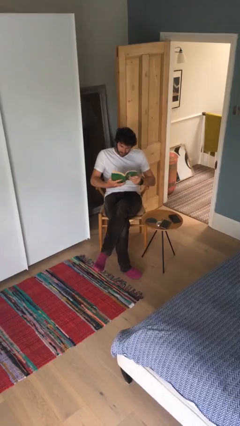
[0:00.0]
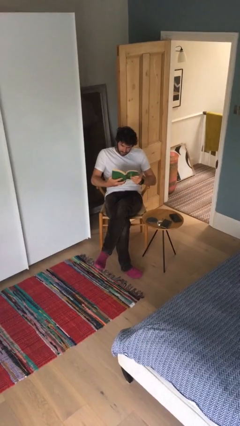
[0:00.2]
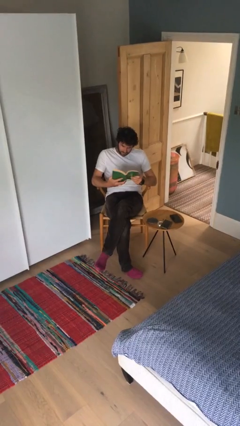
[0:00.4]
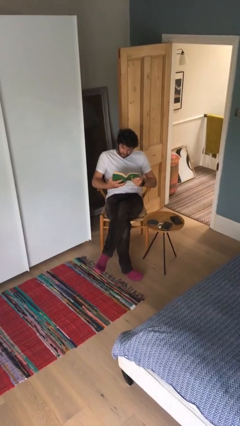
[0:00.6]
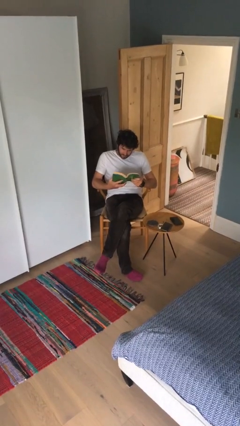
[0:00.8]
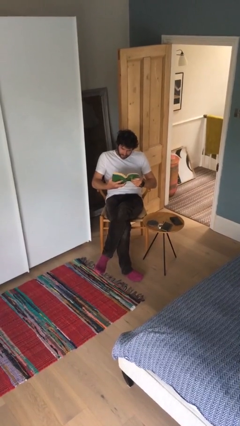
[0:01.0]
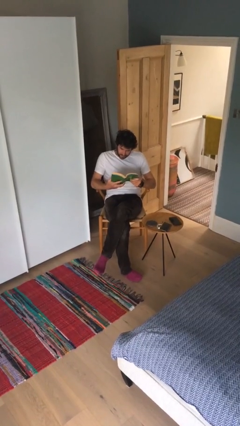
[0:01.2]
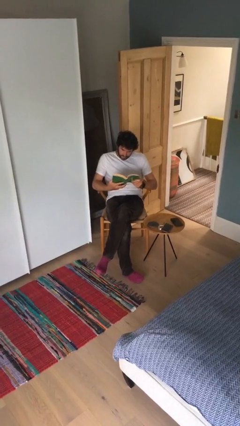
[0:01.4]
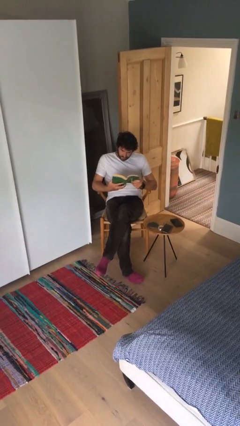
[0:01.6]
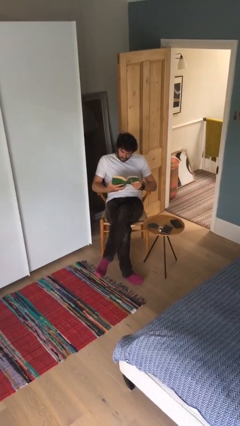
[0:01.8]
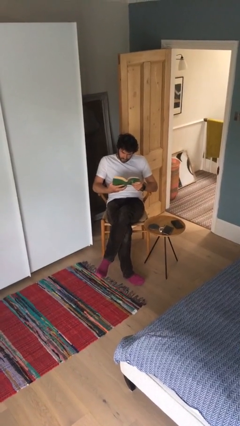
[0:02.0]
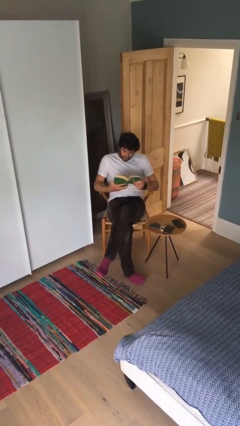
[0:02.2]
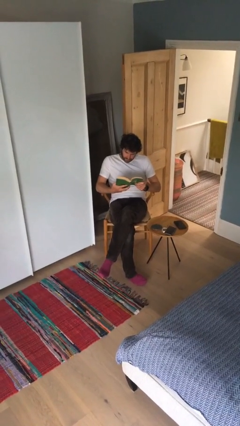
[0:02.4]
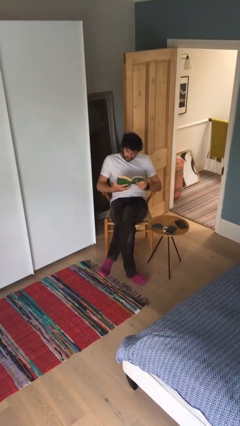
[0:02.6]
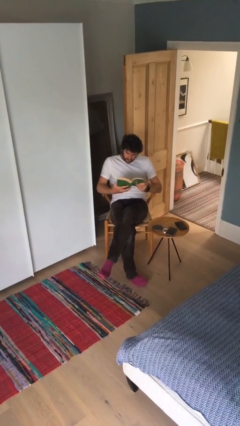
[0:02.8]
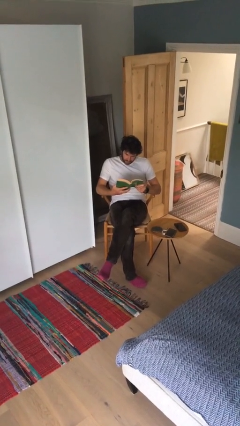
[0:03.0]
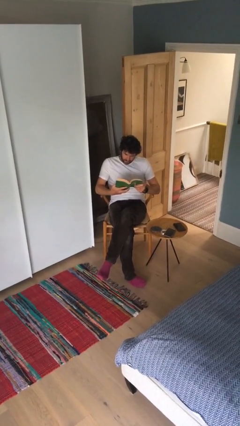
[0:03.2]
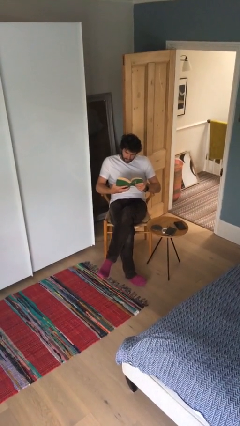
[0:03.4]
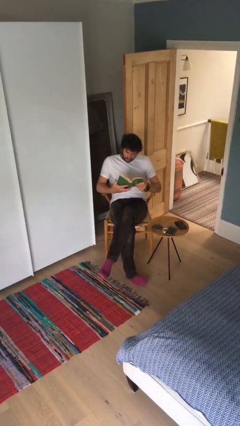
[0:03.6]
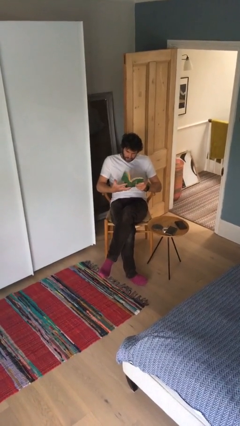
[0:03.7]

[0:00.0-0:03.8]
person reads document

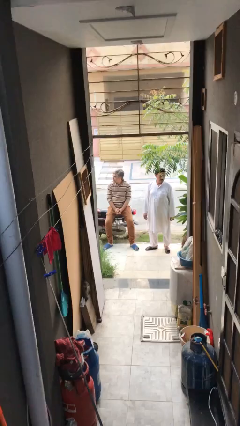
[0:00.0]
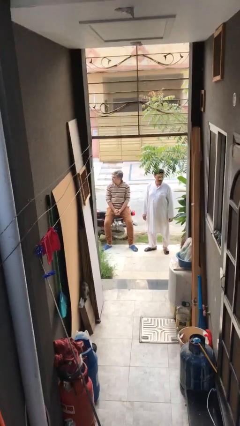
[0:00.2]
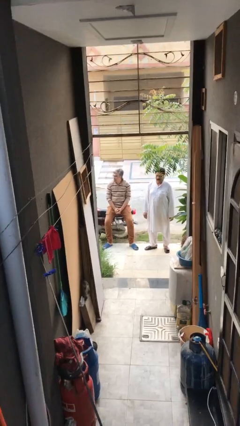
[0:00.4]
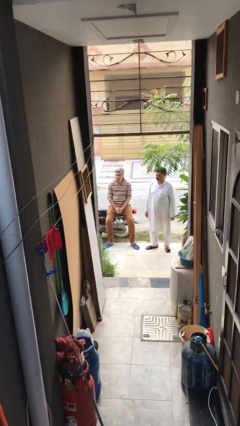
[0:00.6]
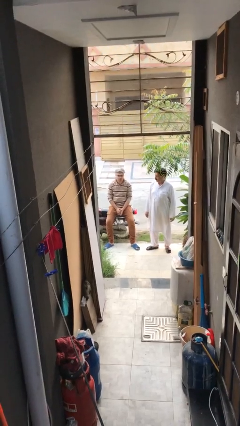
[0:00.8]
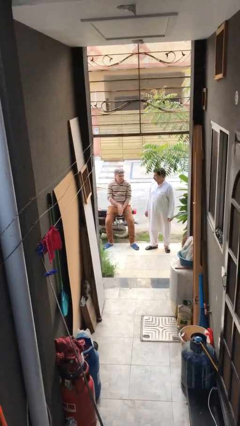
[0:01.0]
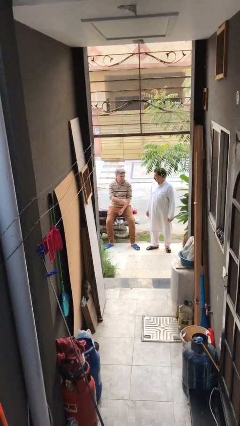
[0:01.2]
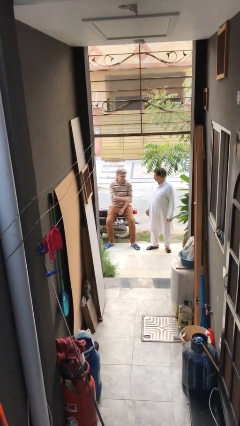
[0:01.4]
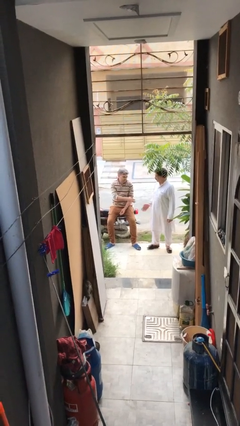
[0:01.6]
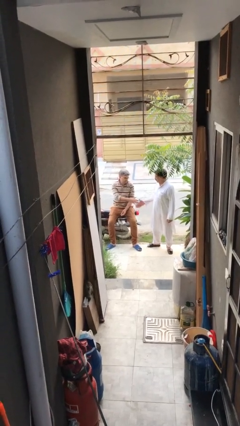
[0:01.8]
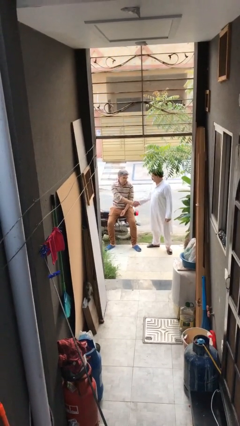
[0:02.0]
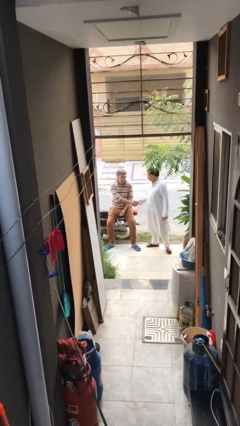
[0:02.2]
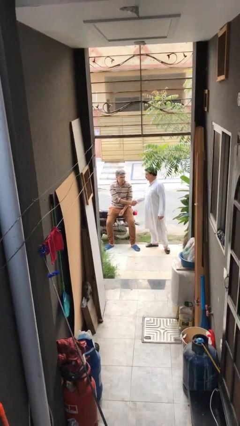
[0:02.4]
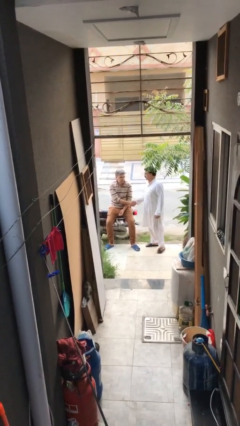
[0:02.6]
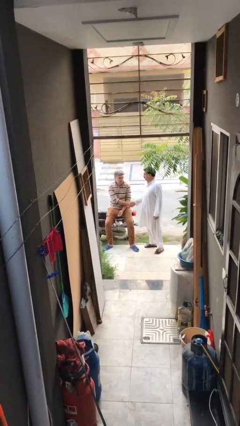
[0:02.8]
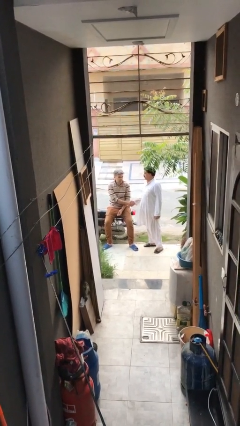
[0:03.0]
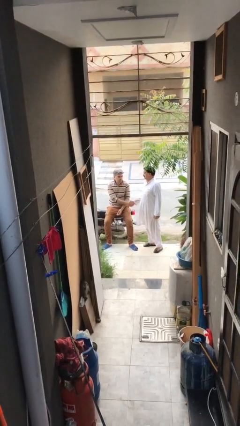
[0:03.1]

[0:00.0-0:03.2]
person shakes hand

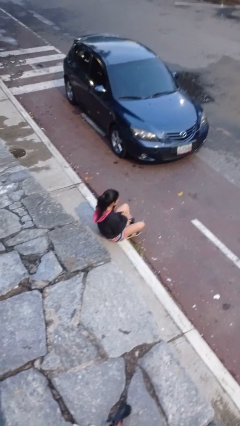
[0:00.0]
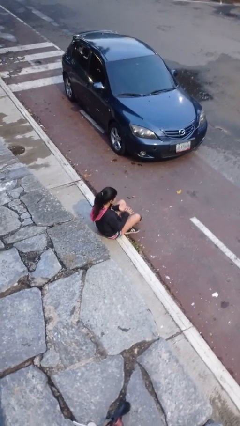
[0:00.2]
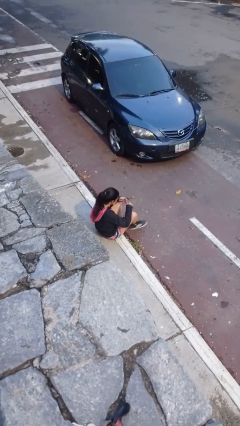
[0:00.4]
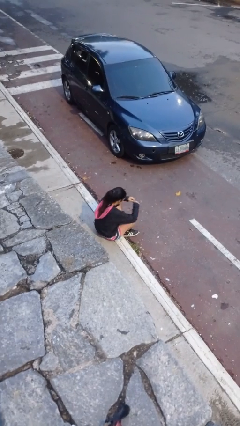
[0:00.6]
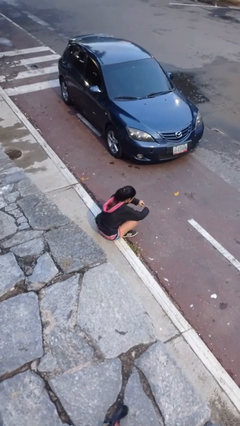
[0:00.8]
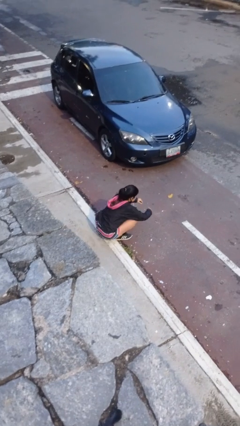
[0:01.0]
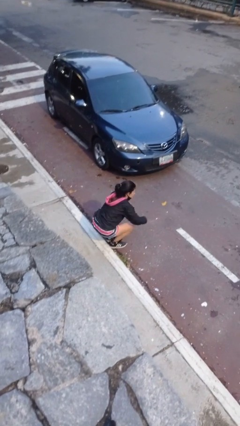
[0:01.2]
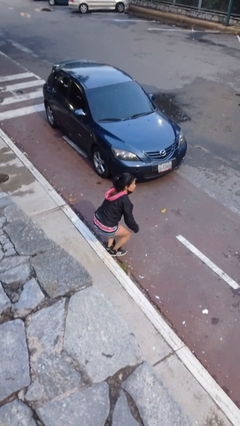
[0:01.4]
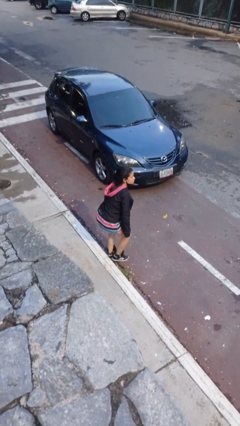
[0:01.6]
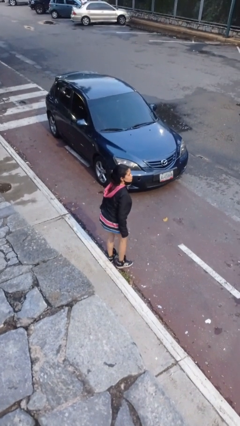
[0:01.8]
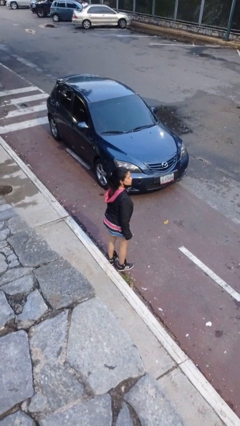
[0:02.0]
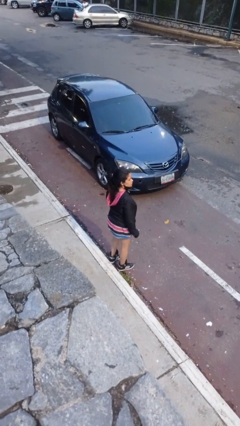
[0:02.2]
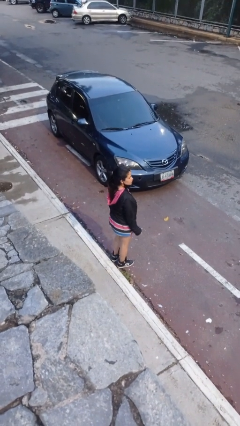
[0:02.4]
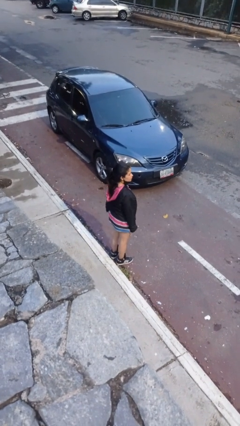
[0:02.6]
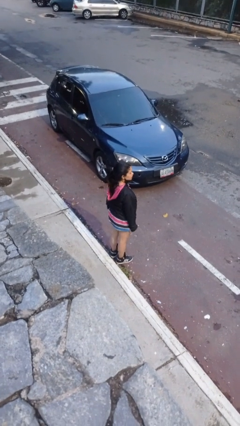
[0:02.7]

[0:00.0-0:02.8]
person stands up from floor

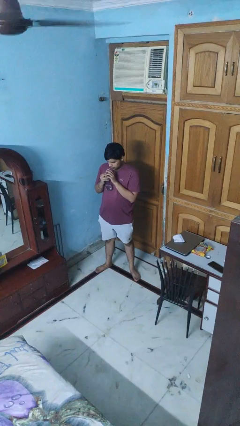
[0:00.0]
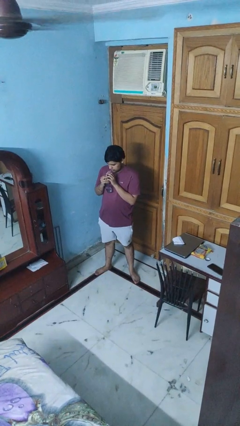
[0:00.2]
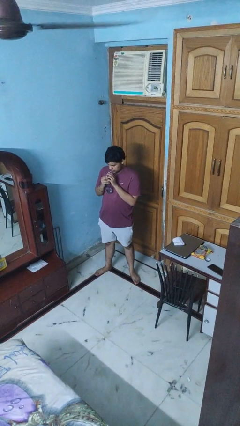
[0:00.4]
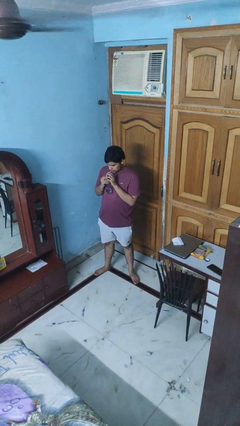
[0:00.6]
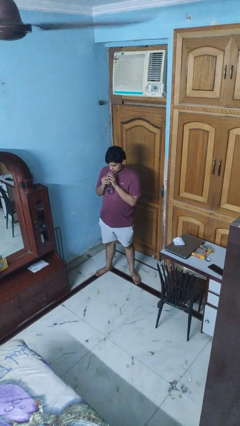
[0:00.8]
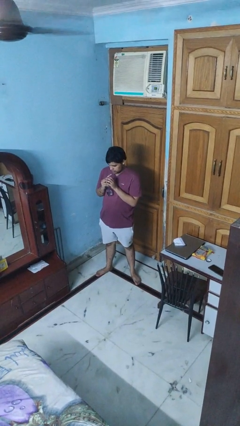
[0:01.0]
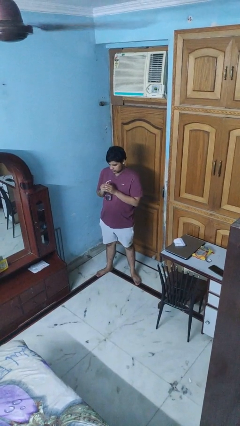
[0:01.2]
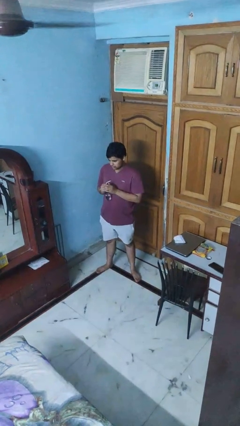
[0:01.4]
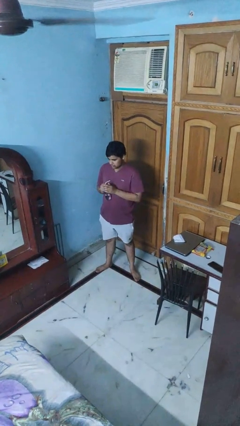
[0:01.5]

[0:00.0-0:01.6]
person drinks from straw

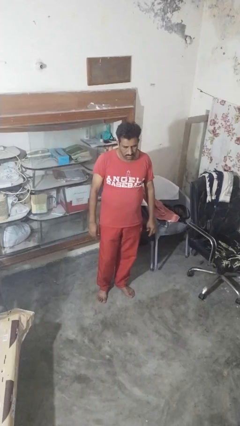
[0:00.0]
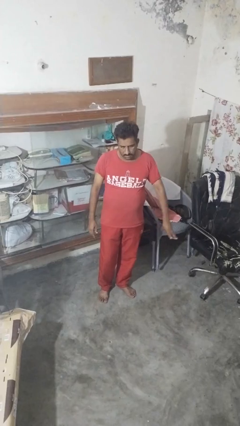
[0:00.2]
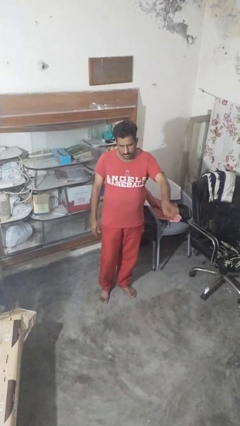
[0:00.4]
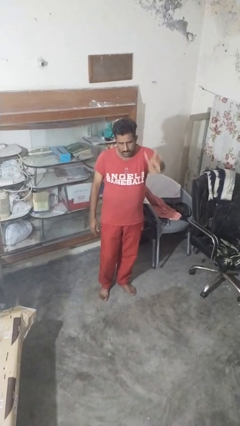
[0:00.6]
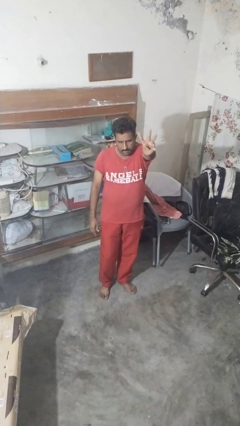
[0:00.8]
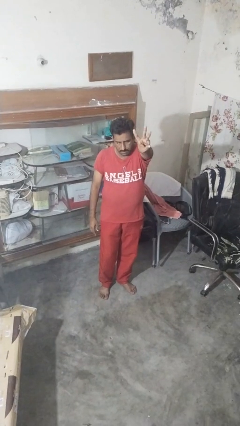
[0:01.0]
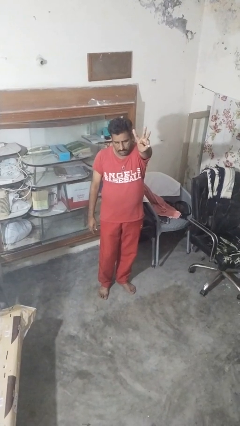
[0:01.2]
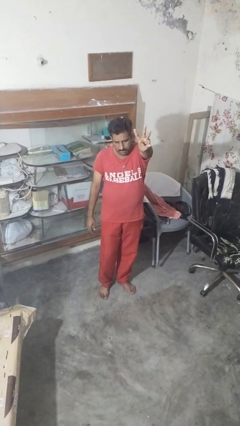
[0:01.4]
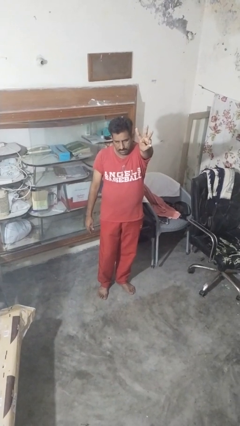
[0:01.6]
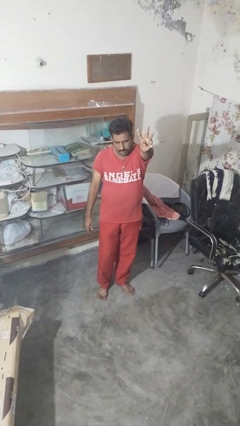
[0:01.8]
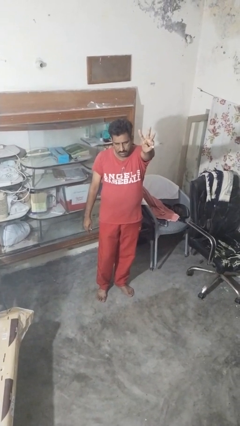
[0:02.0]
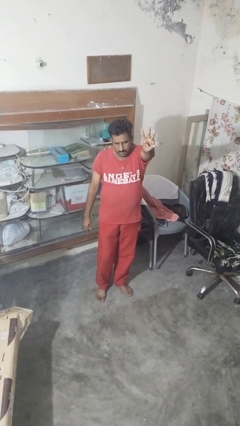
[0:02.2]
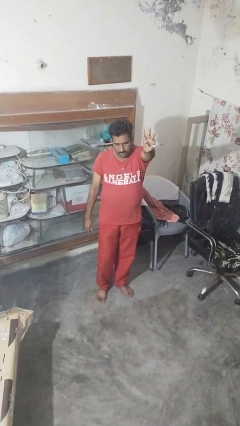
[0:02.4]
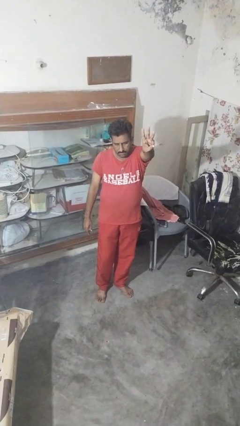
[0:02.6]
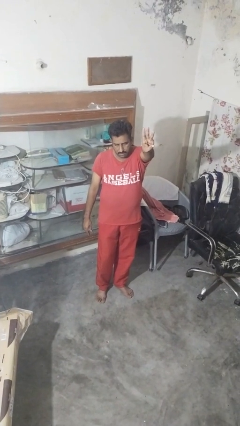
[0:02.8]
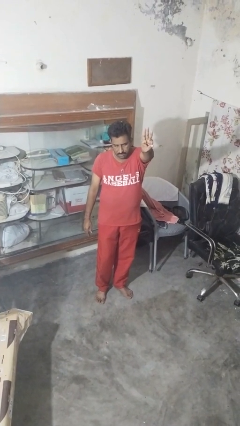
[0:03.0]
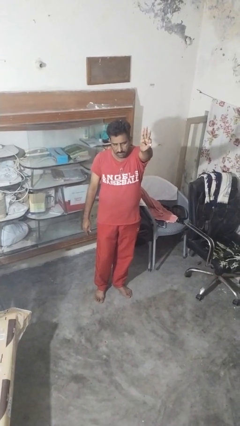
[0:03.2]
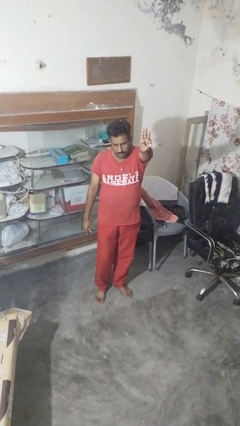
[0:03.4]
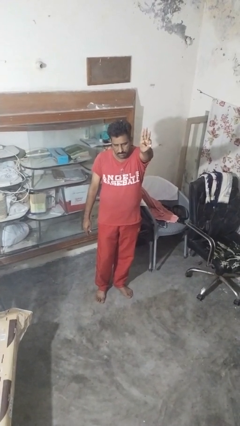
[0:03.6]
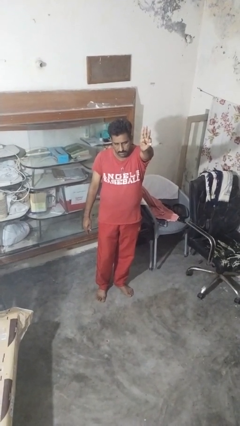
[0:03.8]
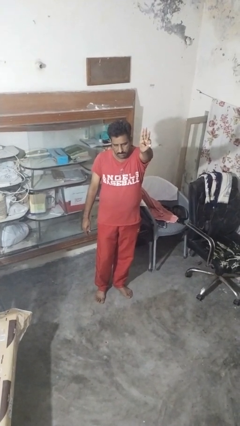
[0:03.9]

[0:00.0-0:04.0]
person gestures number three

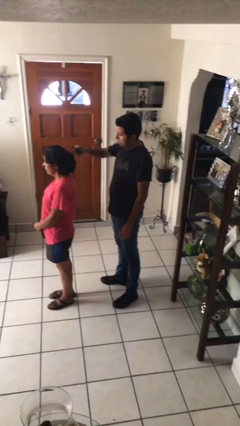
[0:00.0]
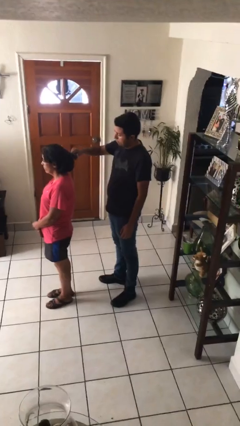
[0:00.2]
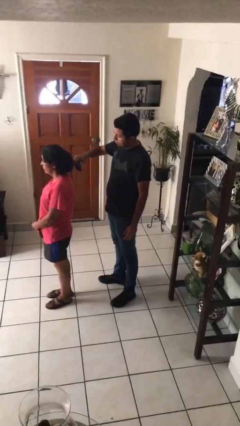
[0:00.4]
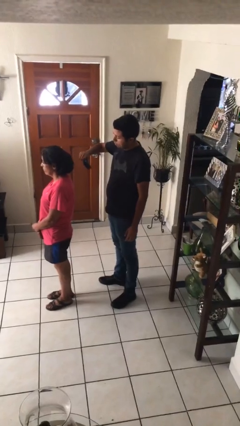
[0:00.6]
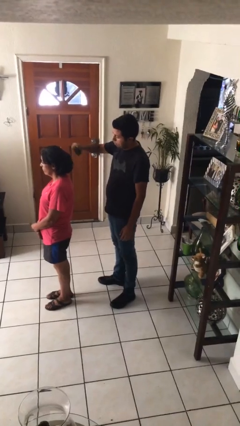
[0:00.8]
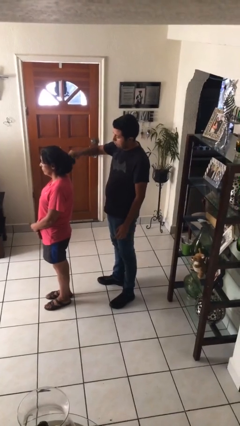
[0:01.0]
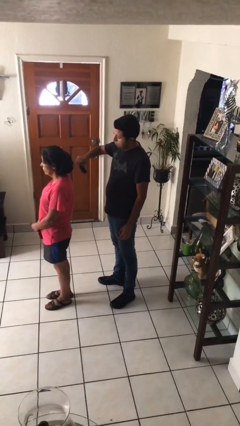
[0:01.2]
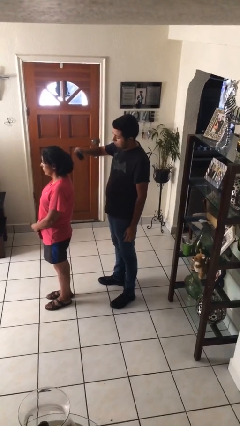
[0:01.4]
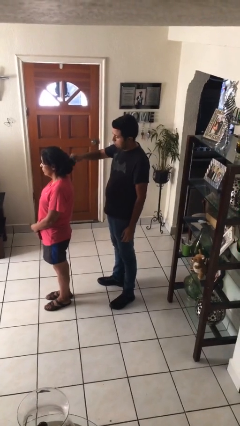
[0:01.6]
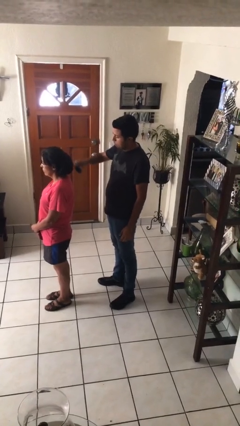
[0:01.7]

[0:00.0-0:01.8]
person brushes hair of person

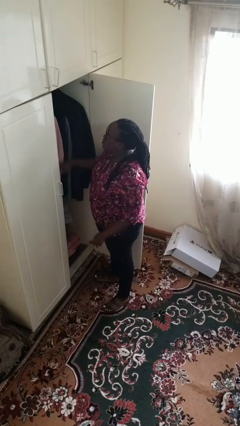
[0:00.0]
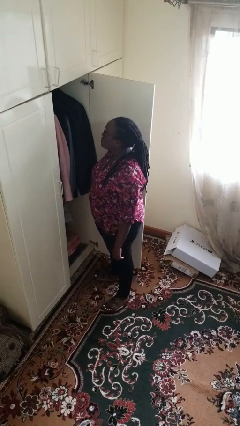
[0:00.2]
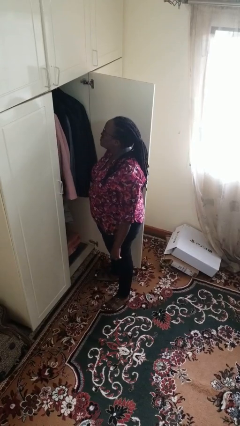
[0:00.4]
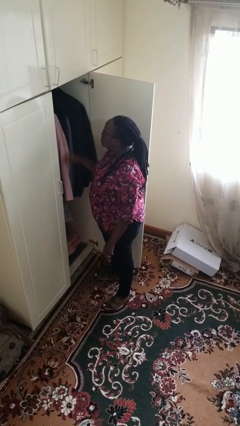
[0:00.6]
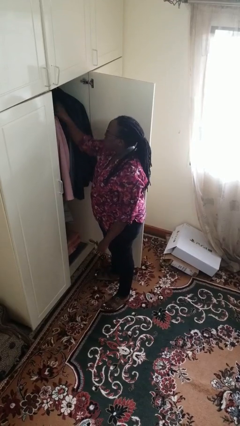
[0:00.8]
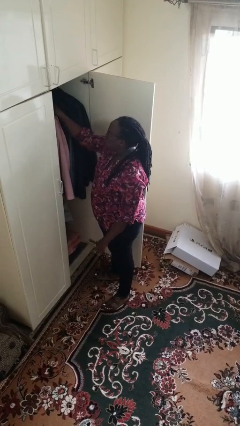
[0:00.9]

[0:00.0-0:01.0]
person takes clothes from closet
